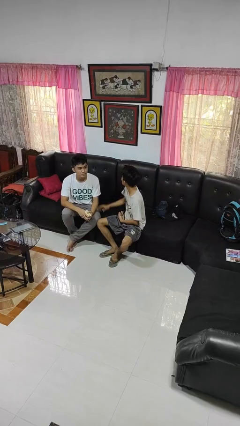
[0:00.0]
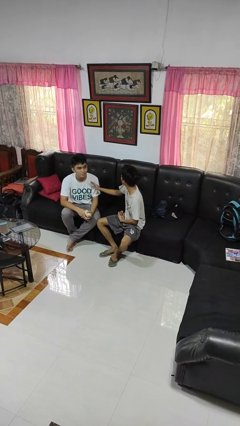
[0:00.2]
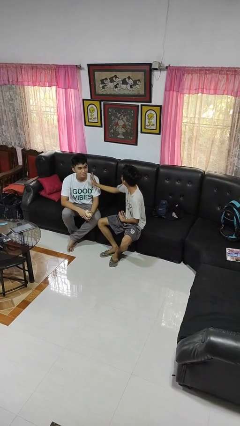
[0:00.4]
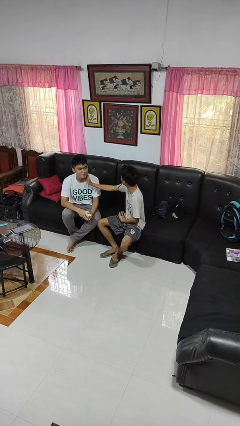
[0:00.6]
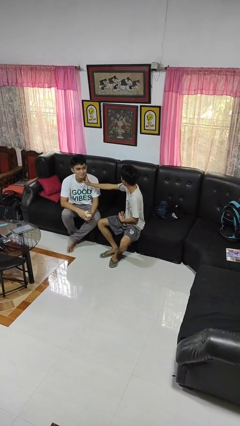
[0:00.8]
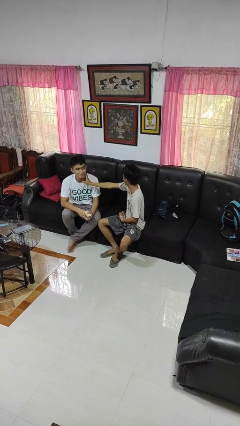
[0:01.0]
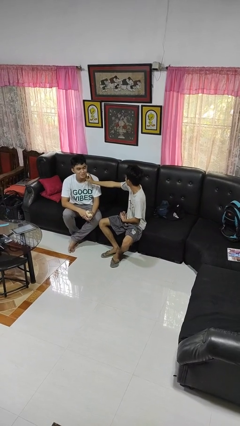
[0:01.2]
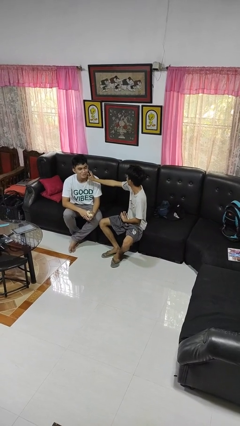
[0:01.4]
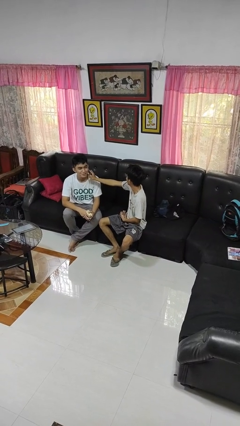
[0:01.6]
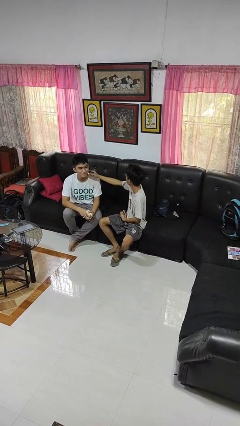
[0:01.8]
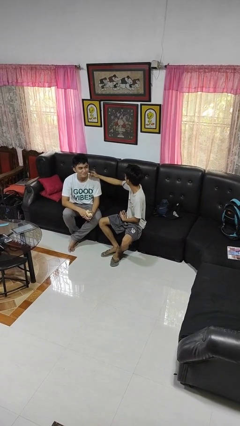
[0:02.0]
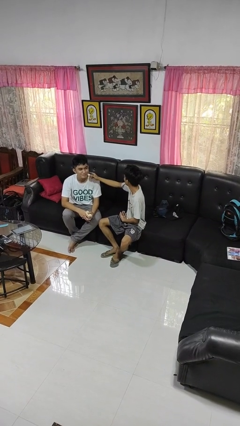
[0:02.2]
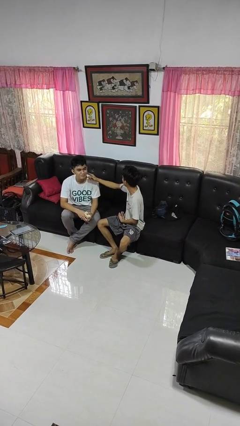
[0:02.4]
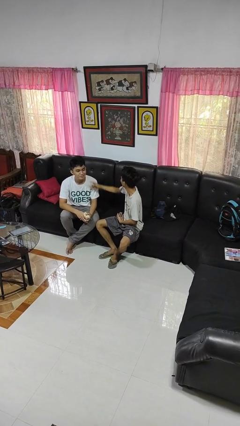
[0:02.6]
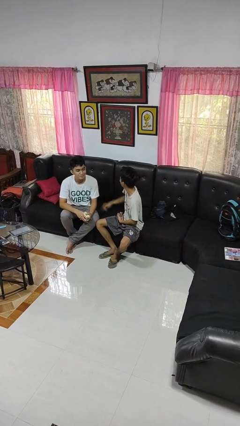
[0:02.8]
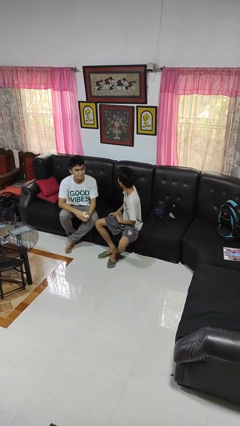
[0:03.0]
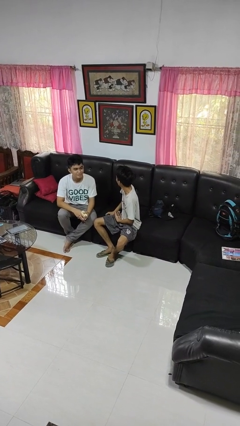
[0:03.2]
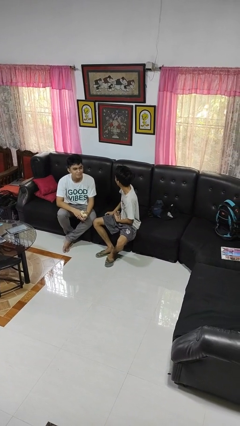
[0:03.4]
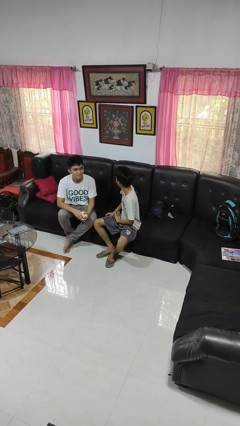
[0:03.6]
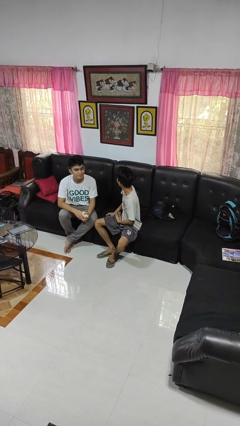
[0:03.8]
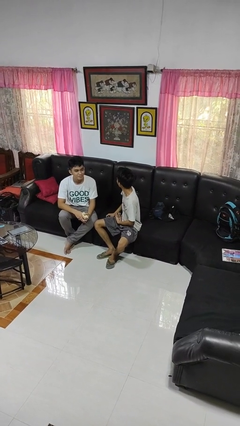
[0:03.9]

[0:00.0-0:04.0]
person touches face of person

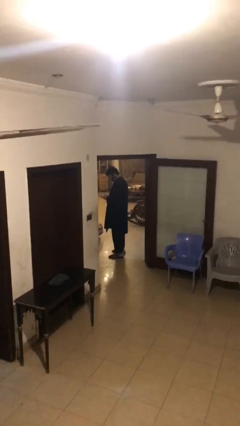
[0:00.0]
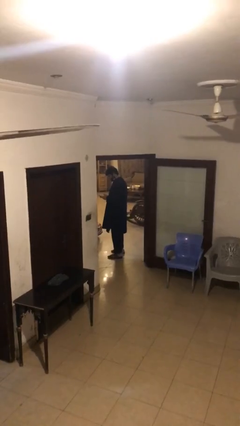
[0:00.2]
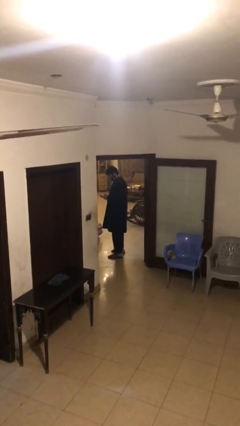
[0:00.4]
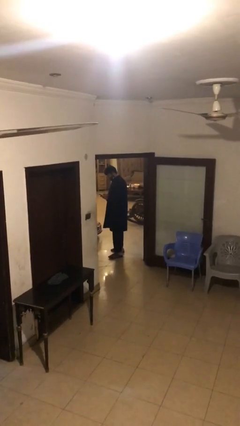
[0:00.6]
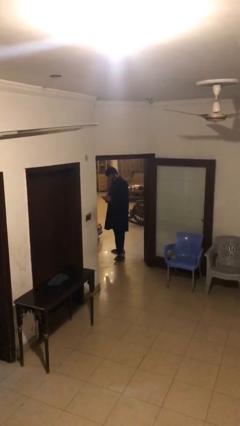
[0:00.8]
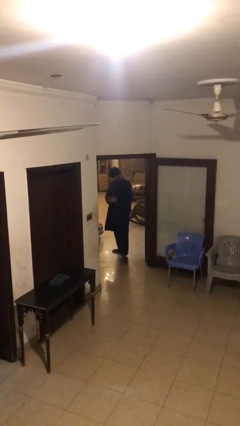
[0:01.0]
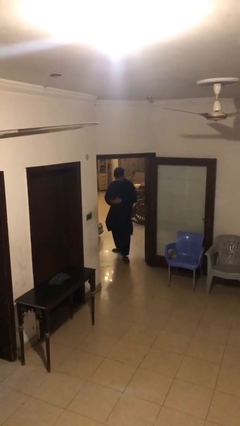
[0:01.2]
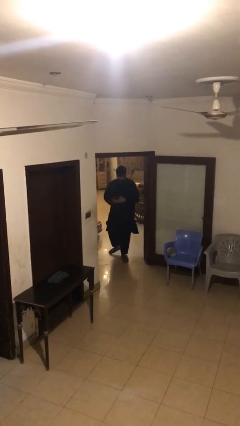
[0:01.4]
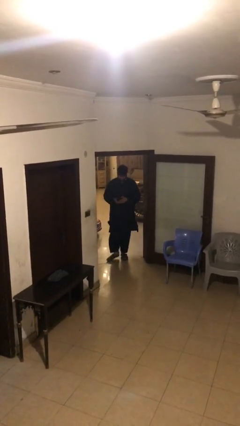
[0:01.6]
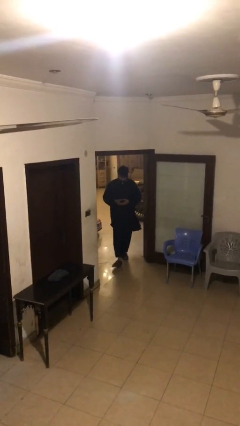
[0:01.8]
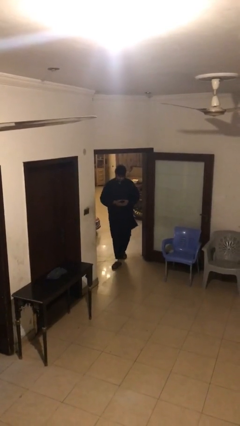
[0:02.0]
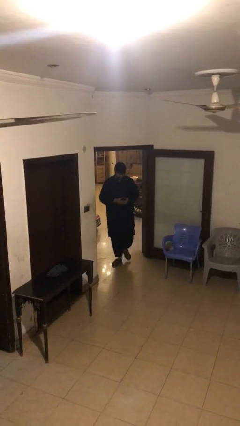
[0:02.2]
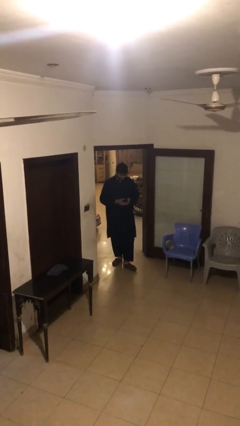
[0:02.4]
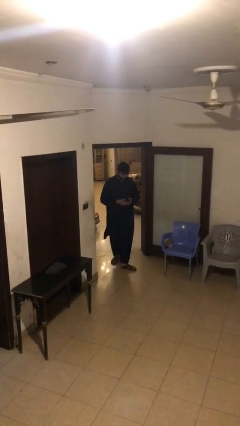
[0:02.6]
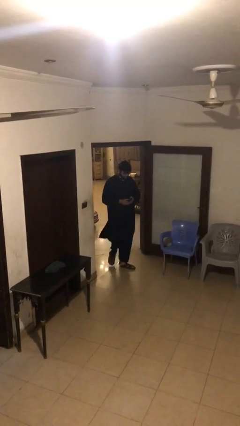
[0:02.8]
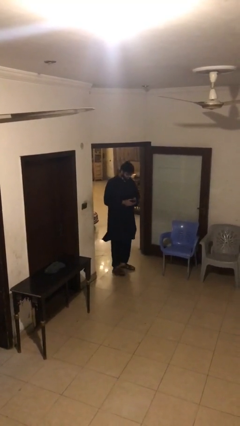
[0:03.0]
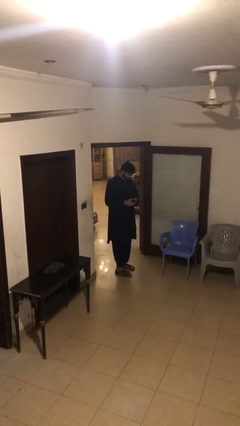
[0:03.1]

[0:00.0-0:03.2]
person enters scene through structure

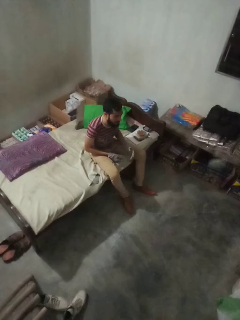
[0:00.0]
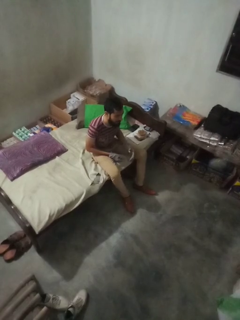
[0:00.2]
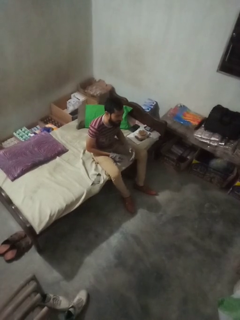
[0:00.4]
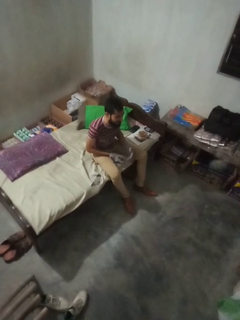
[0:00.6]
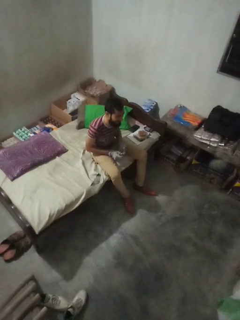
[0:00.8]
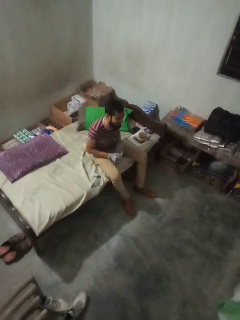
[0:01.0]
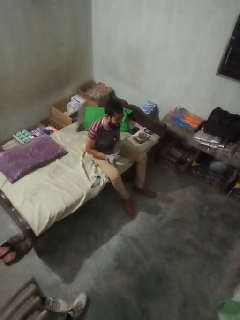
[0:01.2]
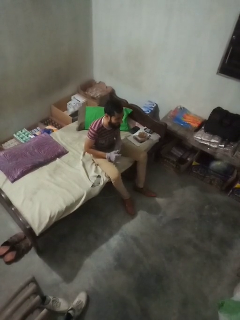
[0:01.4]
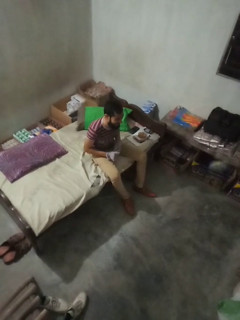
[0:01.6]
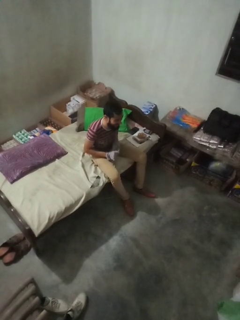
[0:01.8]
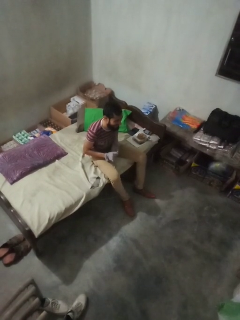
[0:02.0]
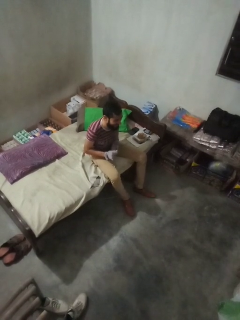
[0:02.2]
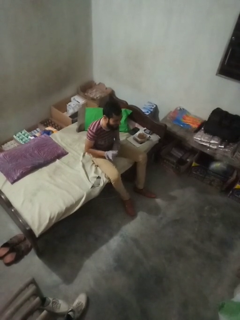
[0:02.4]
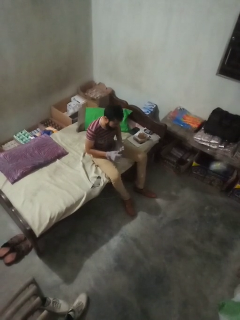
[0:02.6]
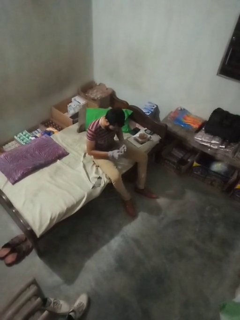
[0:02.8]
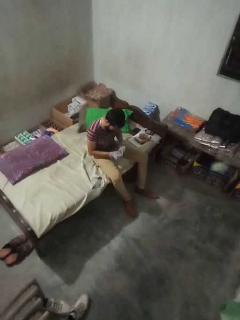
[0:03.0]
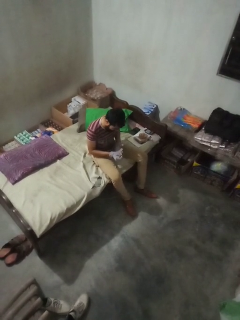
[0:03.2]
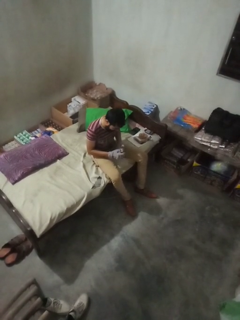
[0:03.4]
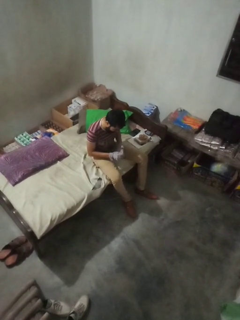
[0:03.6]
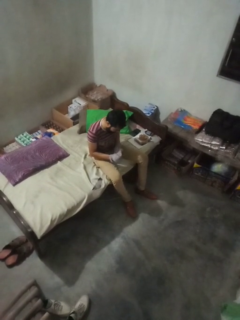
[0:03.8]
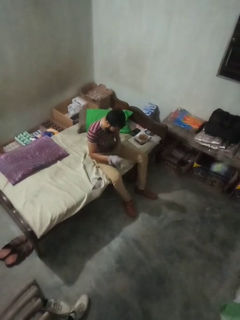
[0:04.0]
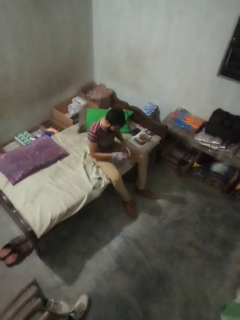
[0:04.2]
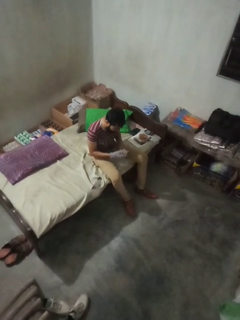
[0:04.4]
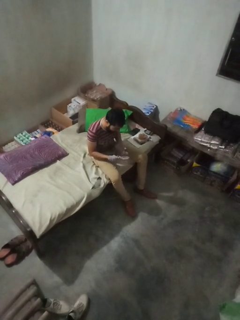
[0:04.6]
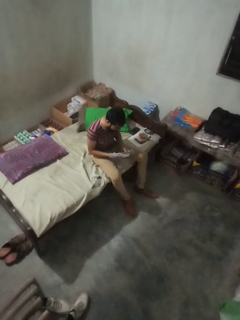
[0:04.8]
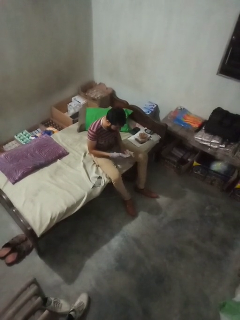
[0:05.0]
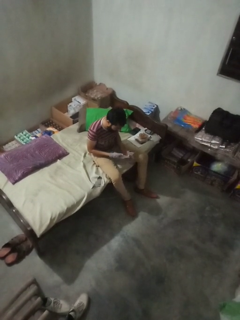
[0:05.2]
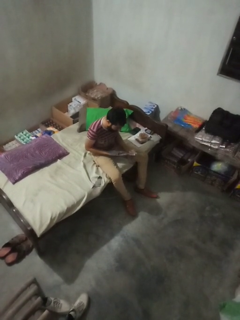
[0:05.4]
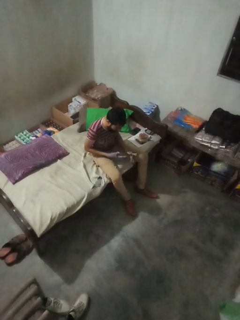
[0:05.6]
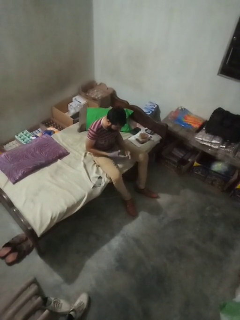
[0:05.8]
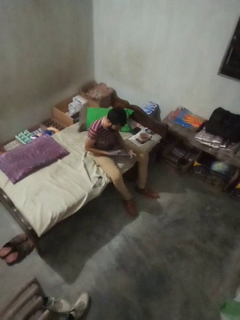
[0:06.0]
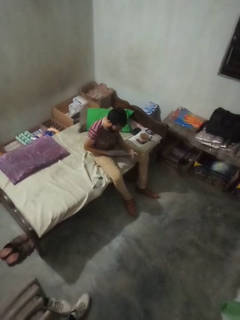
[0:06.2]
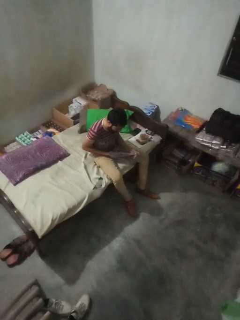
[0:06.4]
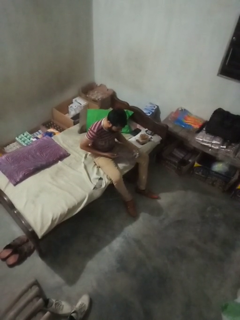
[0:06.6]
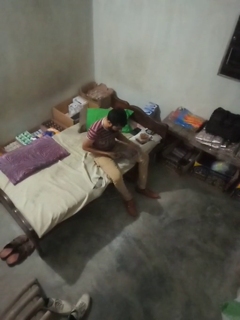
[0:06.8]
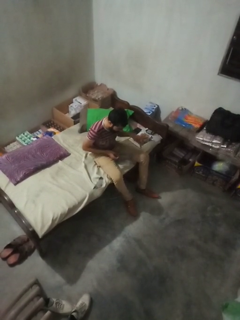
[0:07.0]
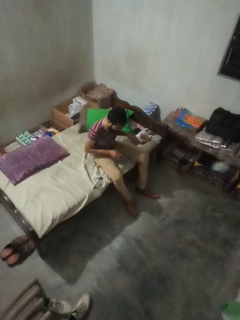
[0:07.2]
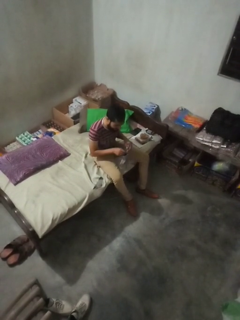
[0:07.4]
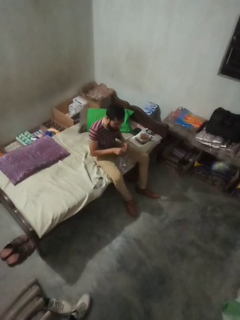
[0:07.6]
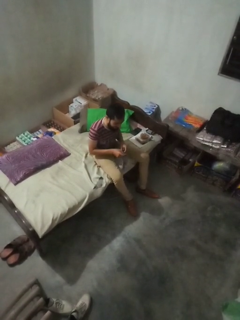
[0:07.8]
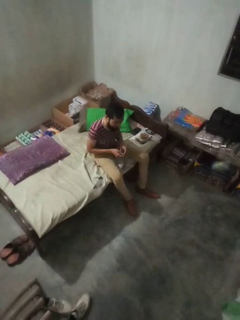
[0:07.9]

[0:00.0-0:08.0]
person takes off gloves

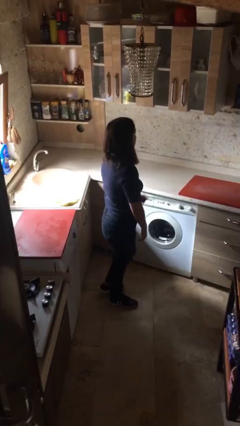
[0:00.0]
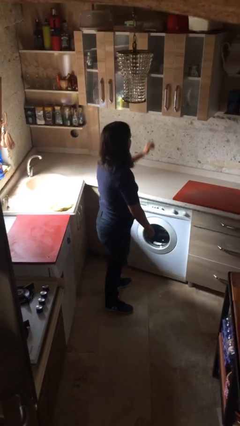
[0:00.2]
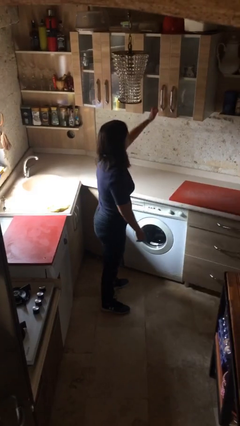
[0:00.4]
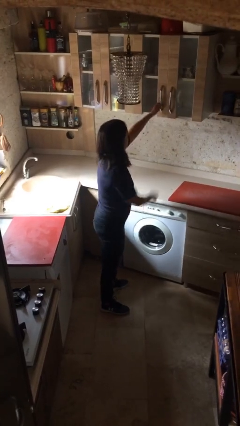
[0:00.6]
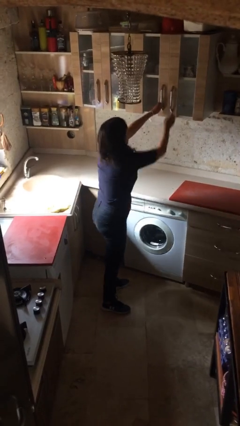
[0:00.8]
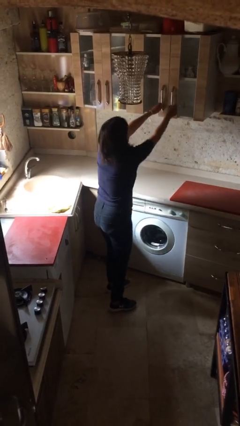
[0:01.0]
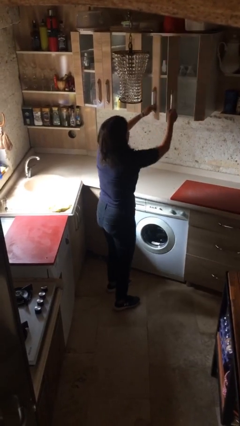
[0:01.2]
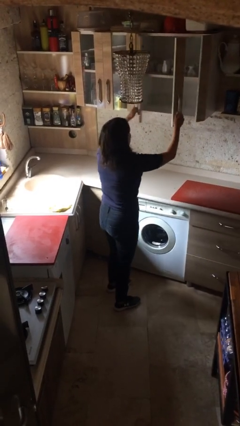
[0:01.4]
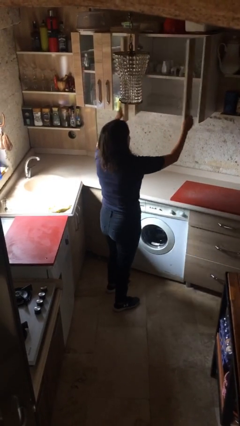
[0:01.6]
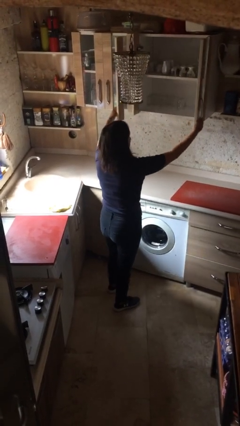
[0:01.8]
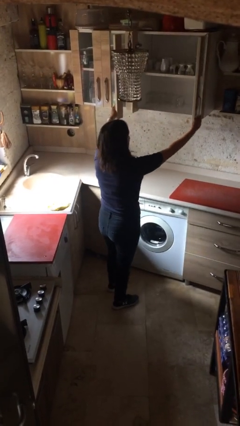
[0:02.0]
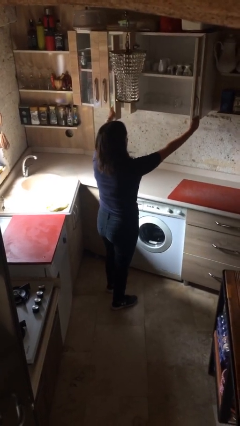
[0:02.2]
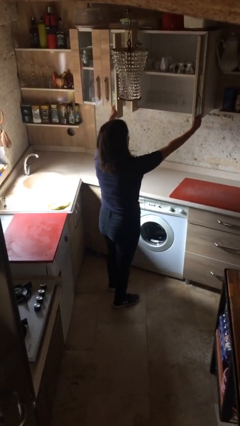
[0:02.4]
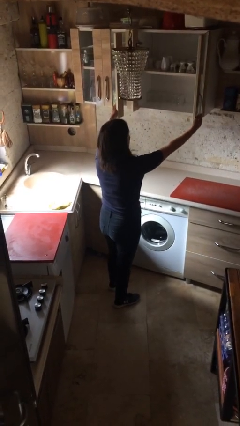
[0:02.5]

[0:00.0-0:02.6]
person opens cabinet

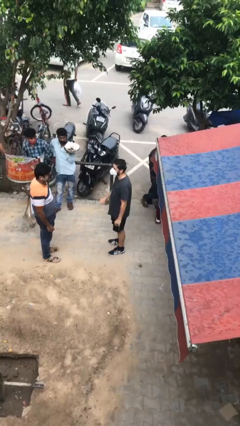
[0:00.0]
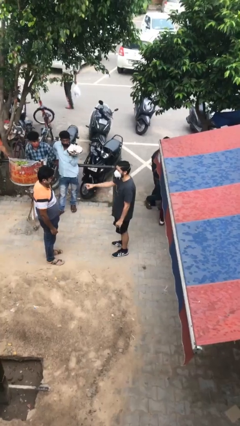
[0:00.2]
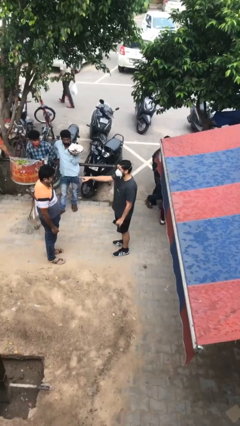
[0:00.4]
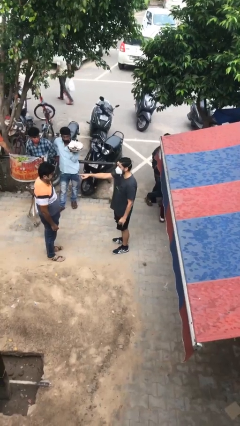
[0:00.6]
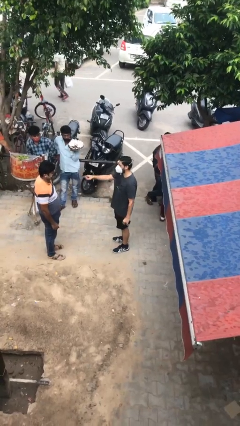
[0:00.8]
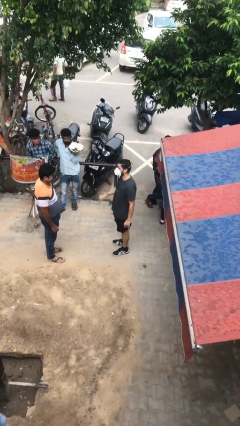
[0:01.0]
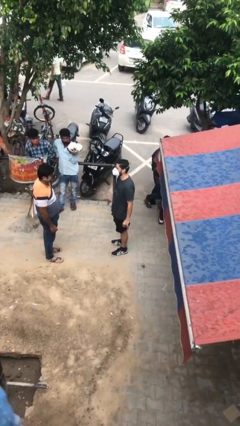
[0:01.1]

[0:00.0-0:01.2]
person points at person

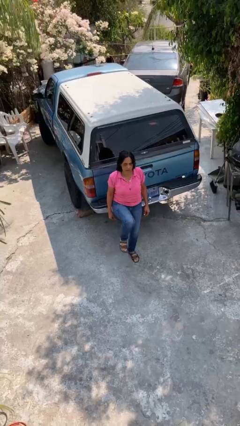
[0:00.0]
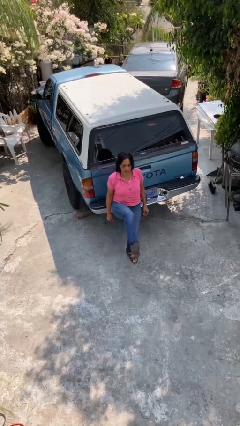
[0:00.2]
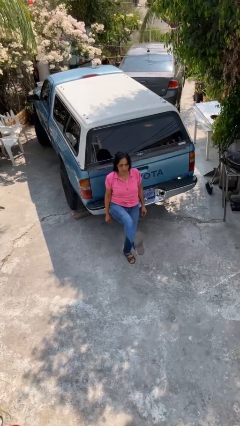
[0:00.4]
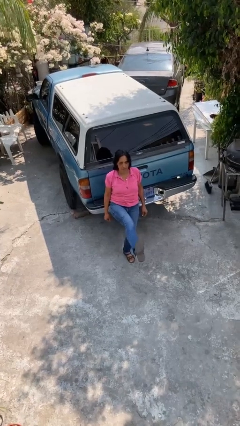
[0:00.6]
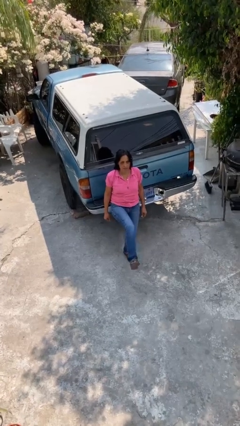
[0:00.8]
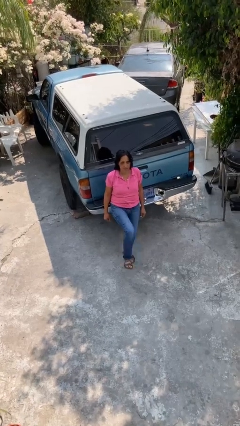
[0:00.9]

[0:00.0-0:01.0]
person karate kicks
